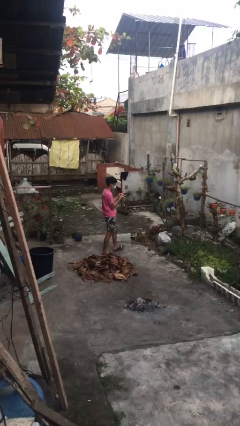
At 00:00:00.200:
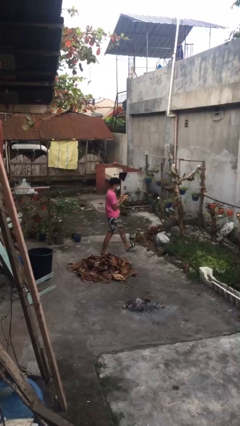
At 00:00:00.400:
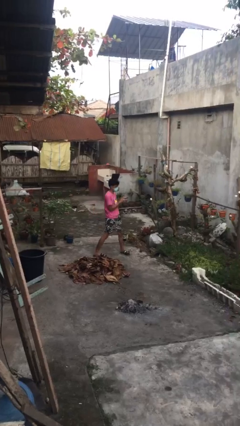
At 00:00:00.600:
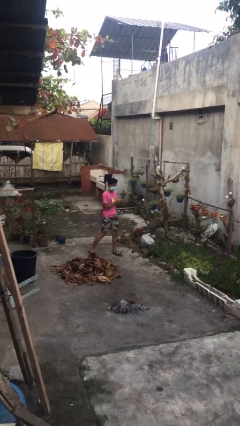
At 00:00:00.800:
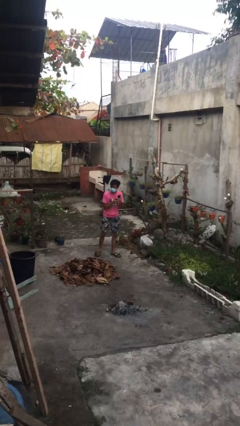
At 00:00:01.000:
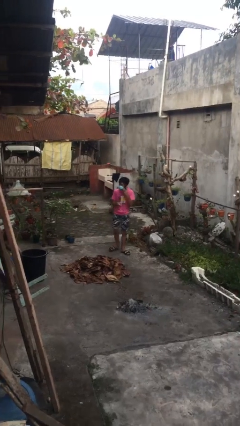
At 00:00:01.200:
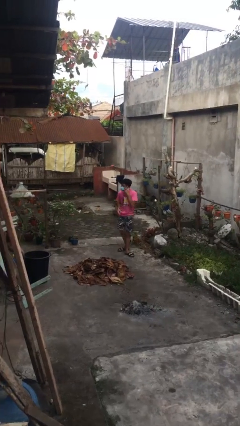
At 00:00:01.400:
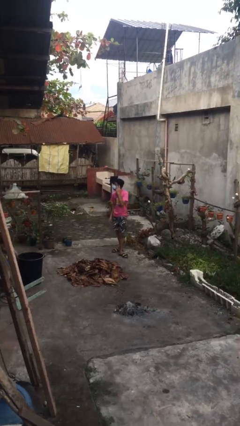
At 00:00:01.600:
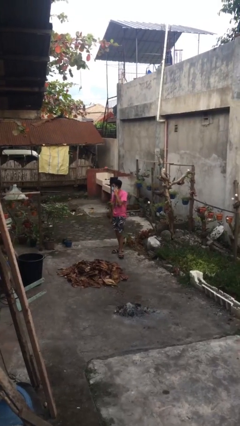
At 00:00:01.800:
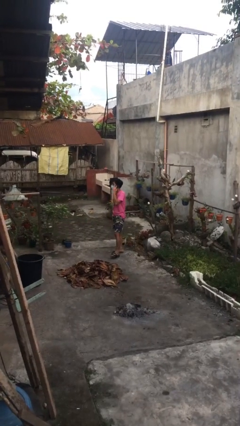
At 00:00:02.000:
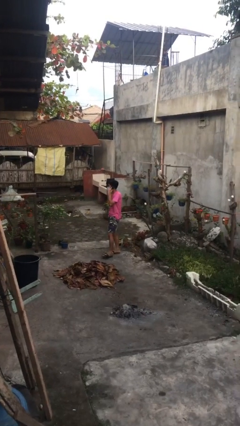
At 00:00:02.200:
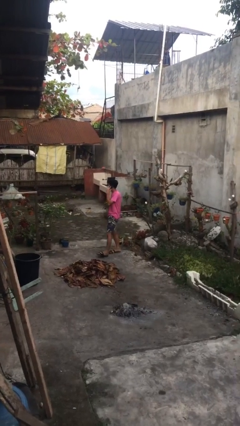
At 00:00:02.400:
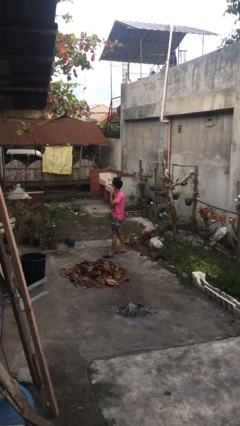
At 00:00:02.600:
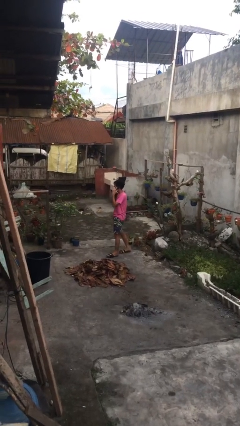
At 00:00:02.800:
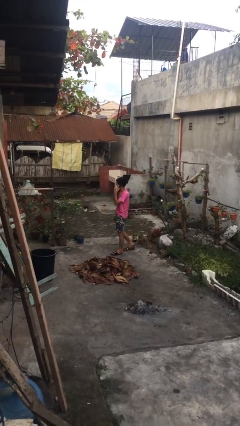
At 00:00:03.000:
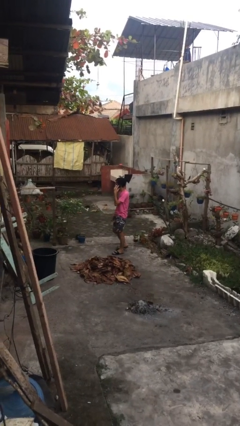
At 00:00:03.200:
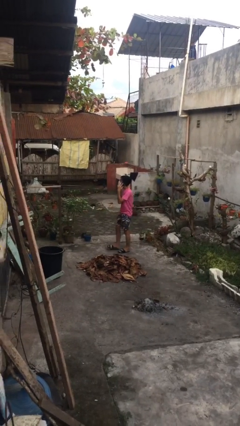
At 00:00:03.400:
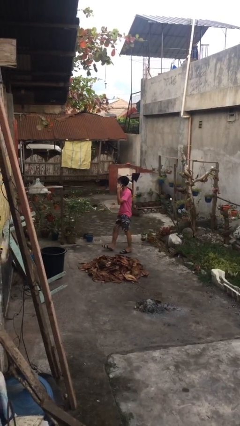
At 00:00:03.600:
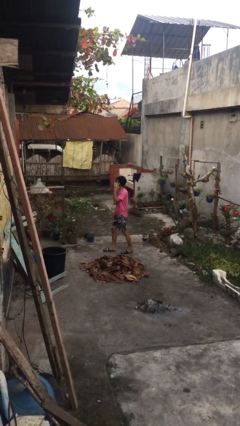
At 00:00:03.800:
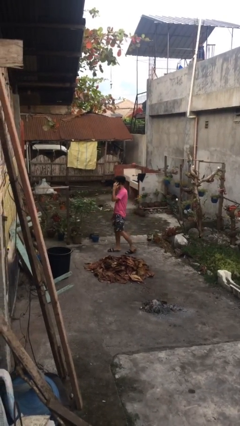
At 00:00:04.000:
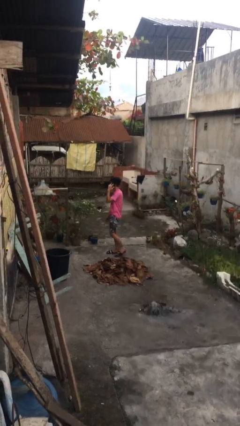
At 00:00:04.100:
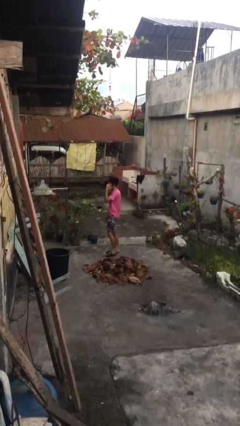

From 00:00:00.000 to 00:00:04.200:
person talks on phone

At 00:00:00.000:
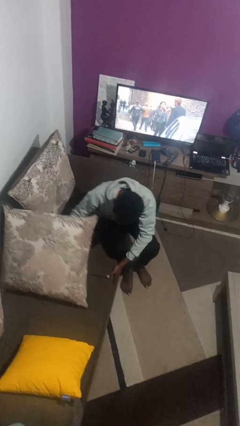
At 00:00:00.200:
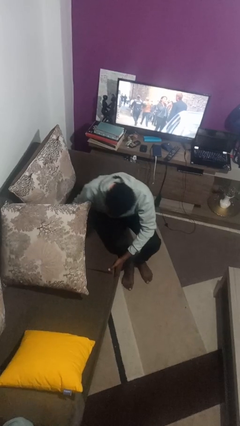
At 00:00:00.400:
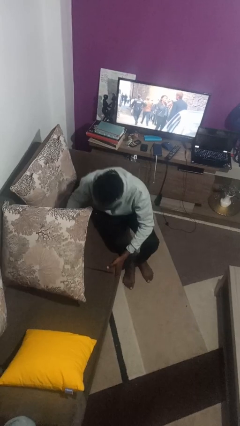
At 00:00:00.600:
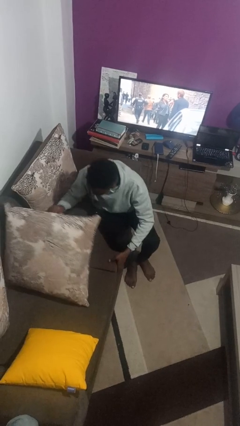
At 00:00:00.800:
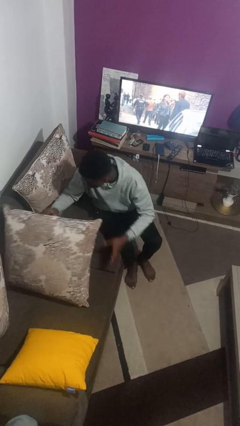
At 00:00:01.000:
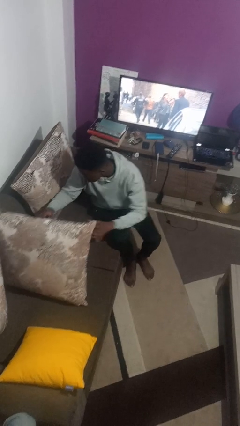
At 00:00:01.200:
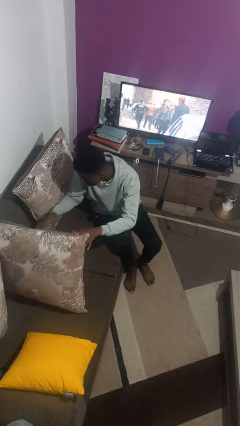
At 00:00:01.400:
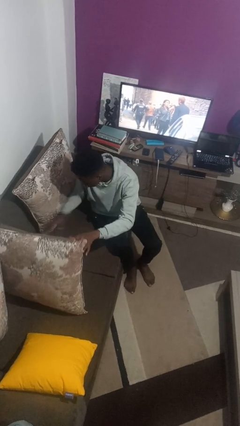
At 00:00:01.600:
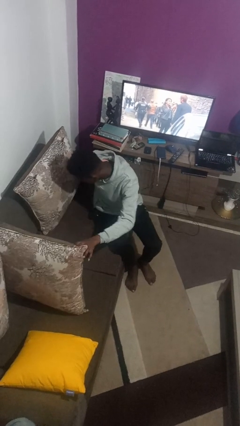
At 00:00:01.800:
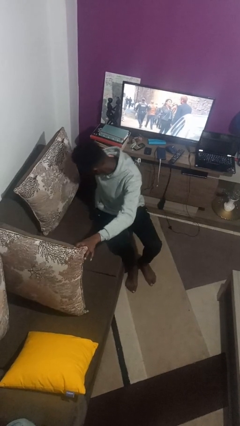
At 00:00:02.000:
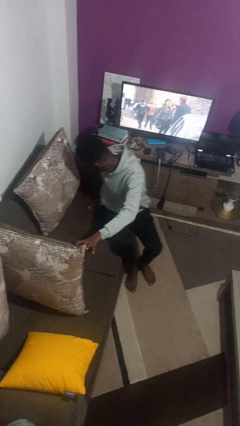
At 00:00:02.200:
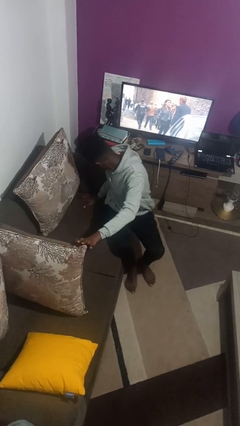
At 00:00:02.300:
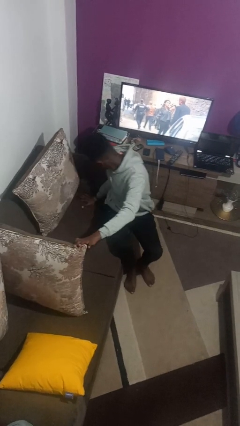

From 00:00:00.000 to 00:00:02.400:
person searches in couch

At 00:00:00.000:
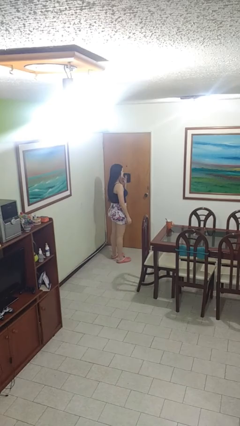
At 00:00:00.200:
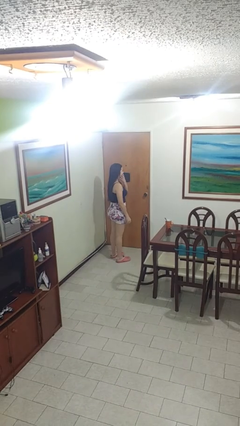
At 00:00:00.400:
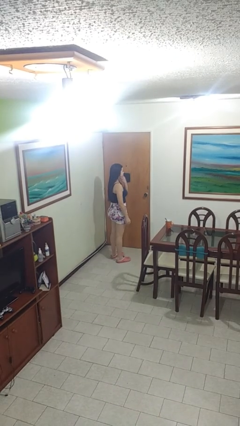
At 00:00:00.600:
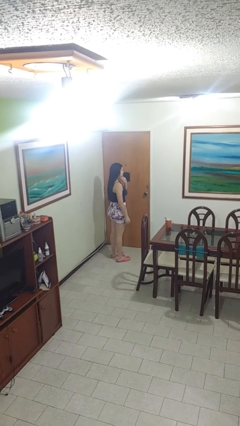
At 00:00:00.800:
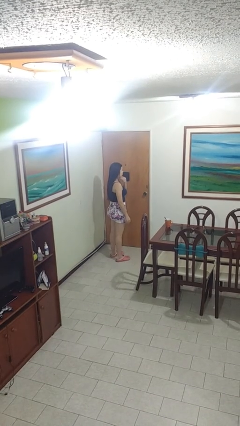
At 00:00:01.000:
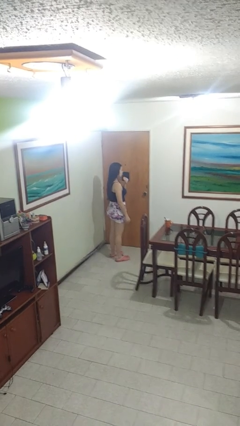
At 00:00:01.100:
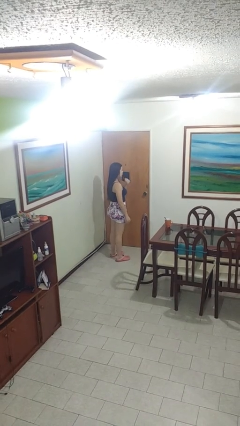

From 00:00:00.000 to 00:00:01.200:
person strokes chin

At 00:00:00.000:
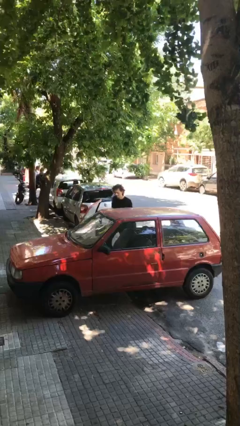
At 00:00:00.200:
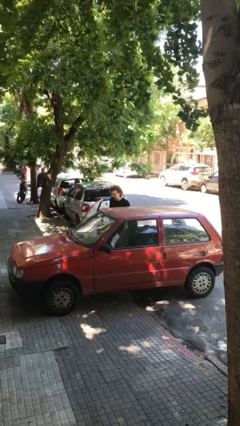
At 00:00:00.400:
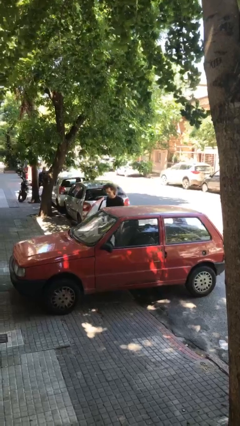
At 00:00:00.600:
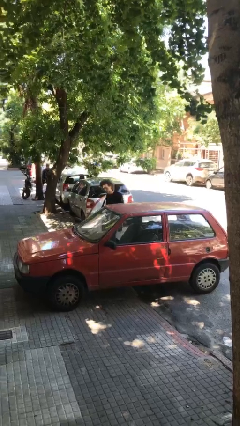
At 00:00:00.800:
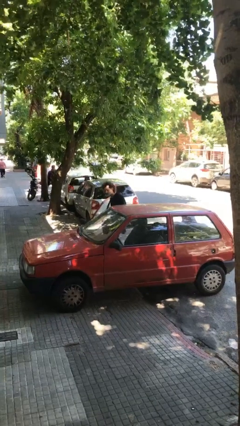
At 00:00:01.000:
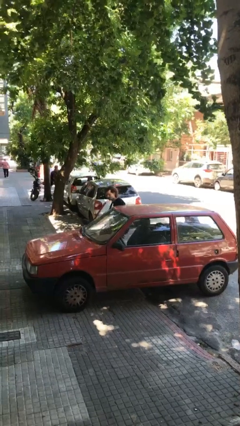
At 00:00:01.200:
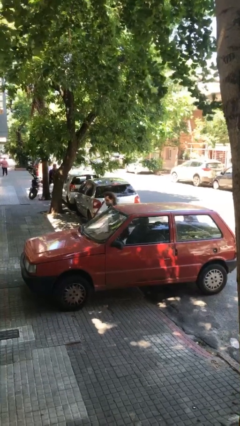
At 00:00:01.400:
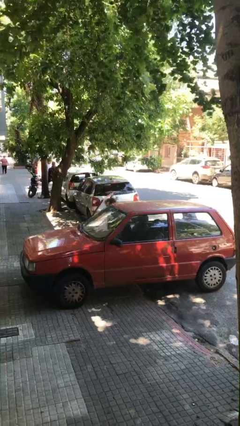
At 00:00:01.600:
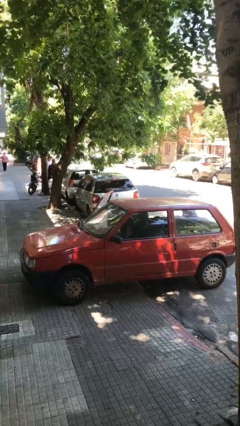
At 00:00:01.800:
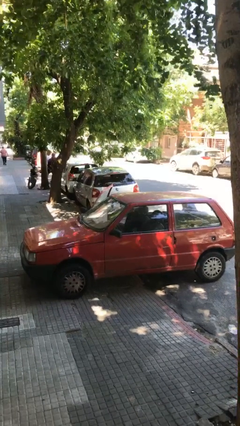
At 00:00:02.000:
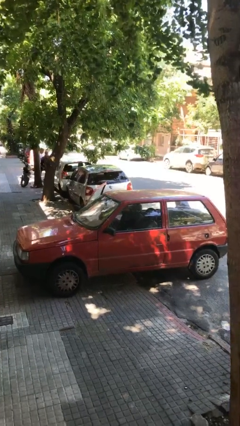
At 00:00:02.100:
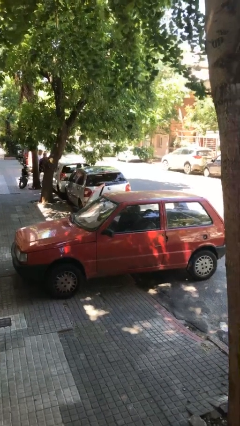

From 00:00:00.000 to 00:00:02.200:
person enters car

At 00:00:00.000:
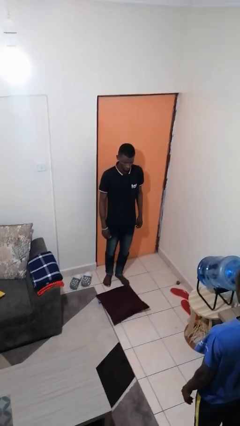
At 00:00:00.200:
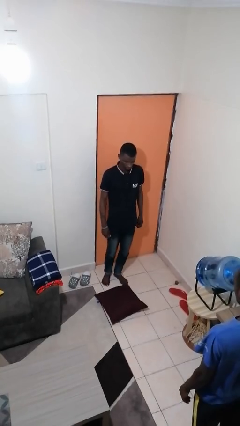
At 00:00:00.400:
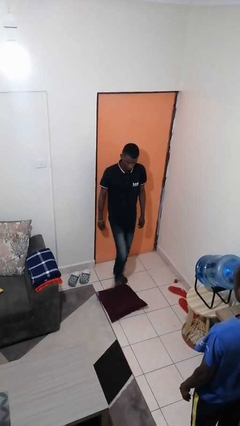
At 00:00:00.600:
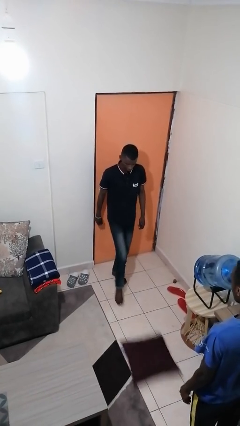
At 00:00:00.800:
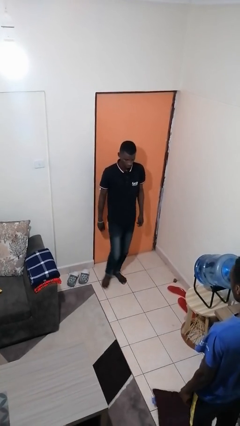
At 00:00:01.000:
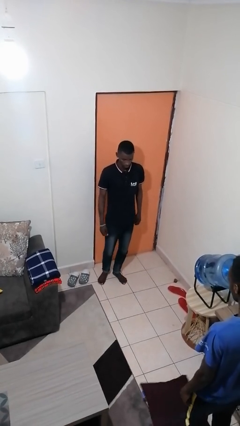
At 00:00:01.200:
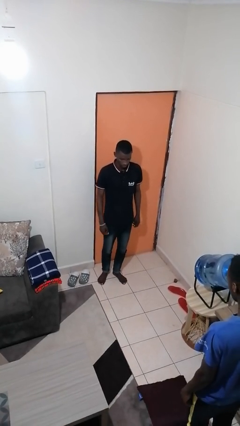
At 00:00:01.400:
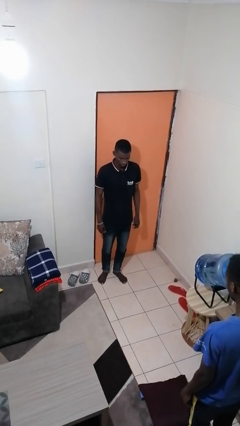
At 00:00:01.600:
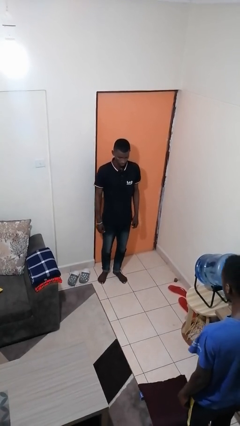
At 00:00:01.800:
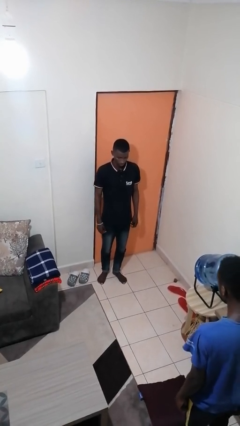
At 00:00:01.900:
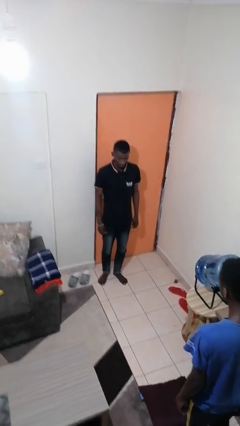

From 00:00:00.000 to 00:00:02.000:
person kicks object to person

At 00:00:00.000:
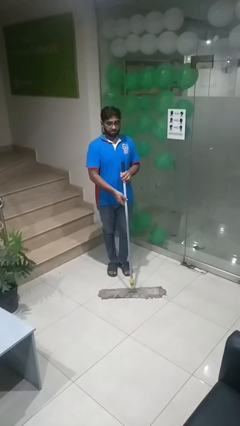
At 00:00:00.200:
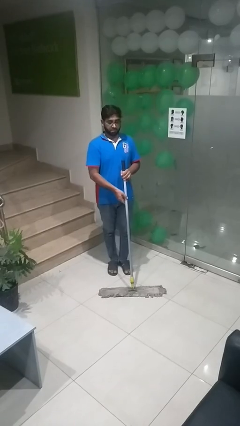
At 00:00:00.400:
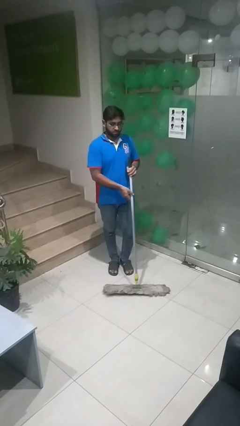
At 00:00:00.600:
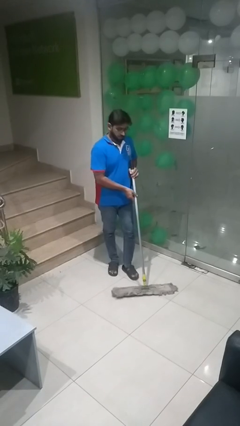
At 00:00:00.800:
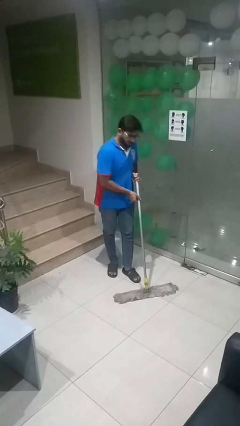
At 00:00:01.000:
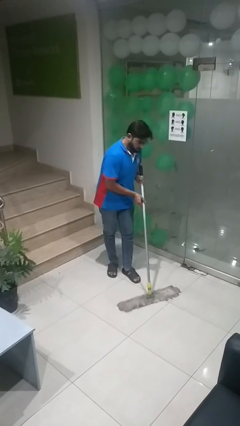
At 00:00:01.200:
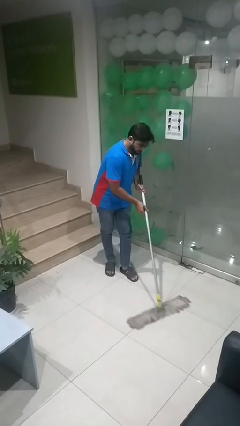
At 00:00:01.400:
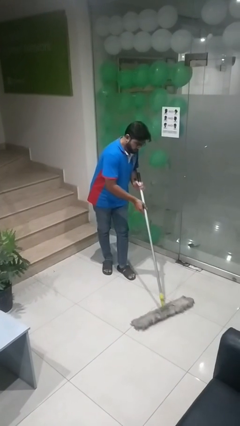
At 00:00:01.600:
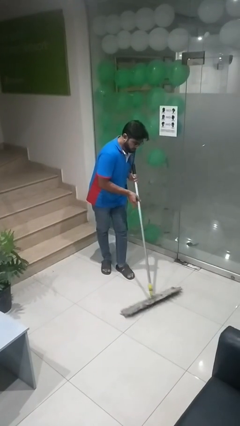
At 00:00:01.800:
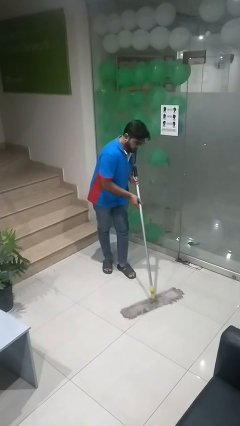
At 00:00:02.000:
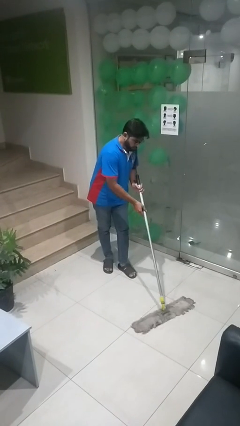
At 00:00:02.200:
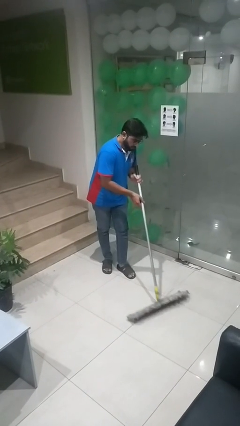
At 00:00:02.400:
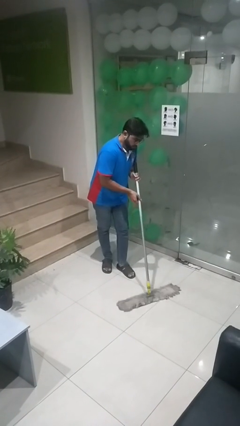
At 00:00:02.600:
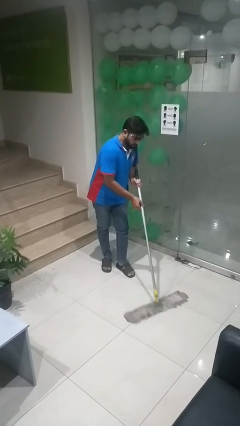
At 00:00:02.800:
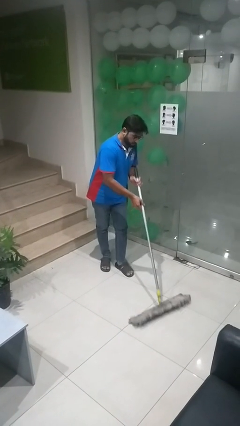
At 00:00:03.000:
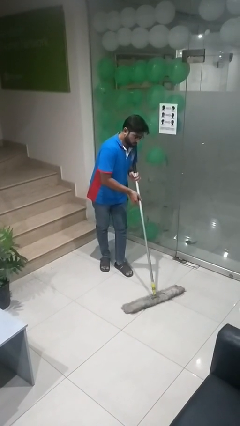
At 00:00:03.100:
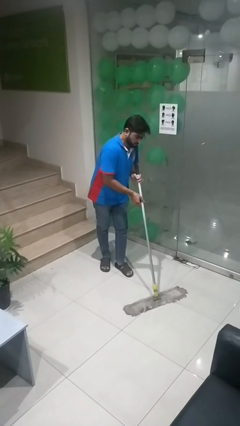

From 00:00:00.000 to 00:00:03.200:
person mops

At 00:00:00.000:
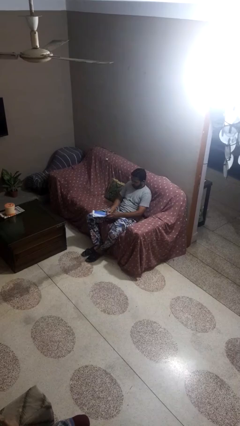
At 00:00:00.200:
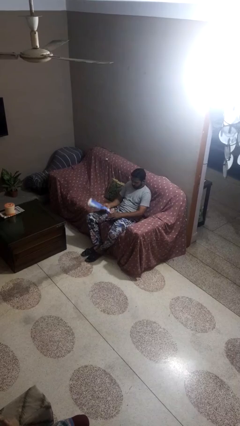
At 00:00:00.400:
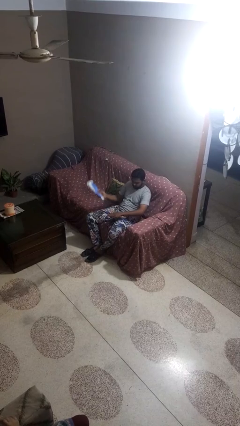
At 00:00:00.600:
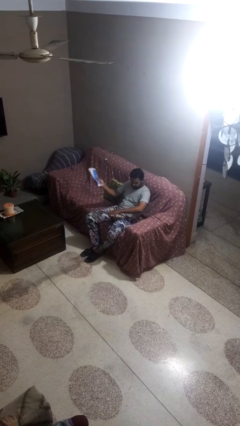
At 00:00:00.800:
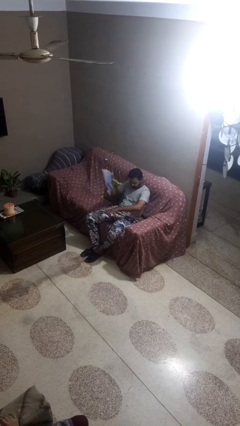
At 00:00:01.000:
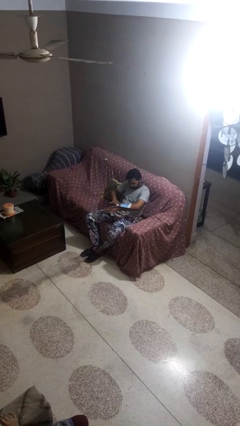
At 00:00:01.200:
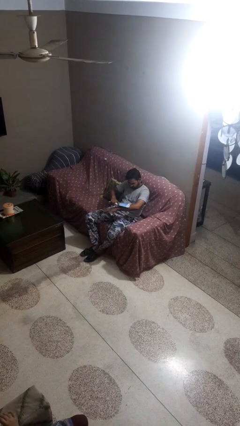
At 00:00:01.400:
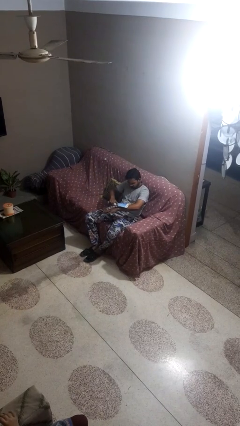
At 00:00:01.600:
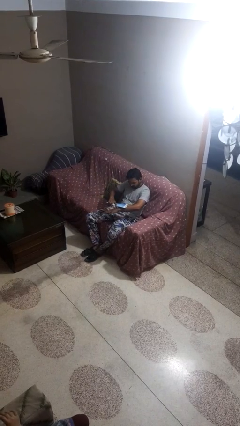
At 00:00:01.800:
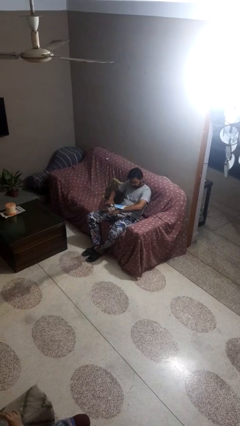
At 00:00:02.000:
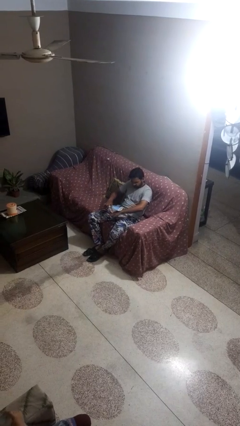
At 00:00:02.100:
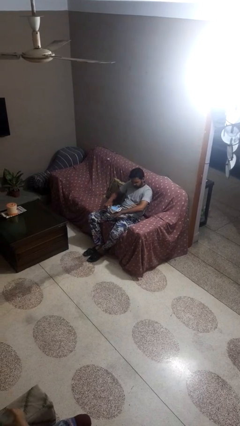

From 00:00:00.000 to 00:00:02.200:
person swats bug
